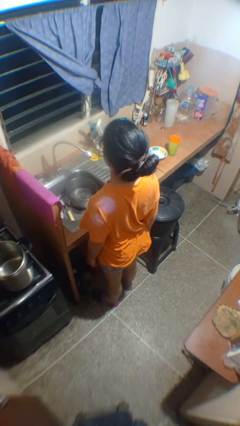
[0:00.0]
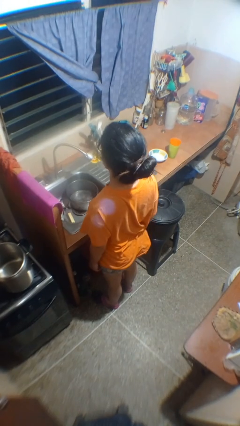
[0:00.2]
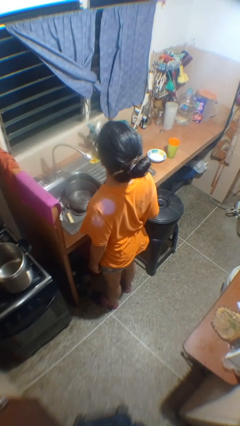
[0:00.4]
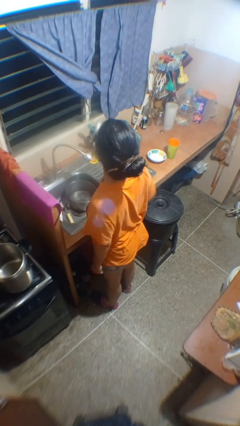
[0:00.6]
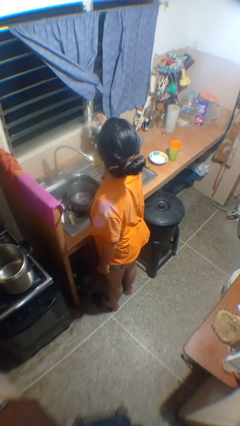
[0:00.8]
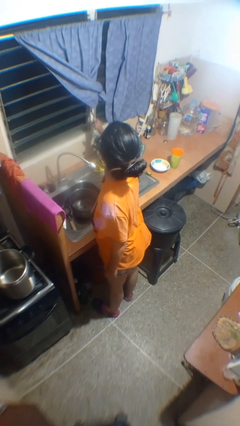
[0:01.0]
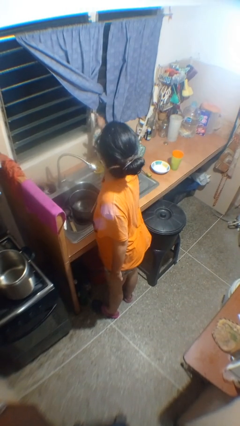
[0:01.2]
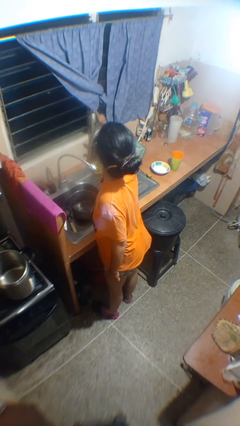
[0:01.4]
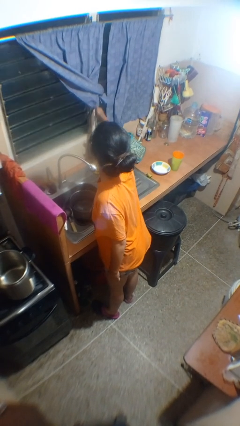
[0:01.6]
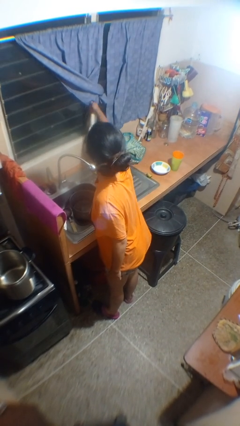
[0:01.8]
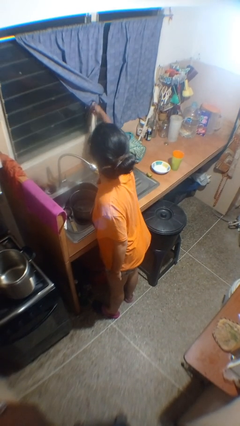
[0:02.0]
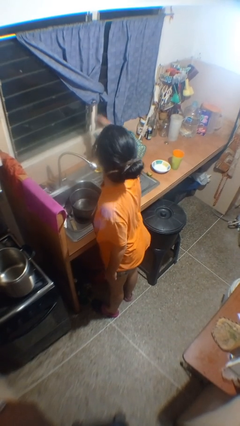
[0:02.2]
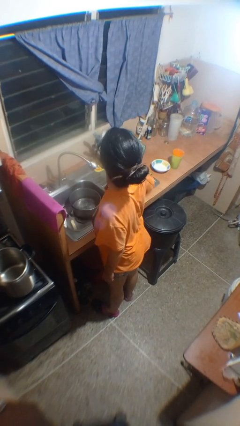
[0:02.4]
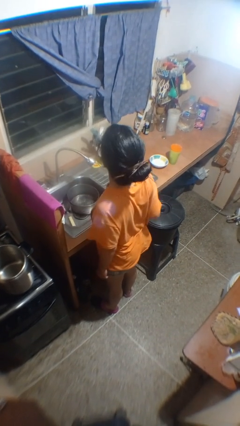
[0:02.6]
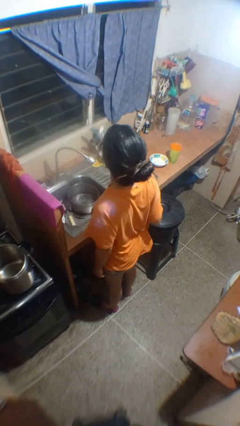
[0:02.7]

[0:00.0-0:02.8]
person closes home window

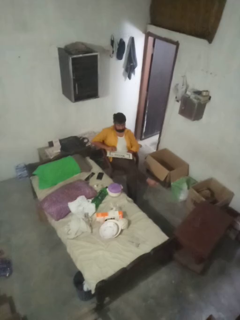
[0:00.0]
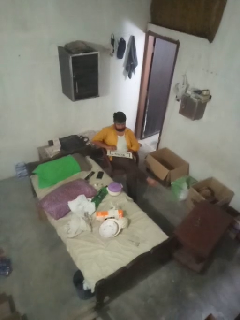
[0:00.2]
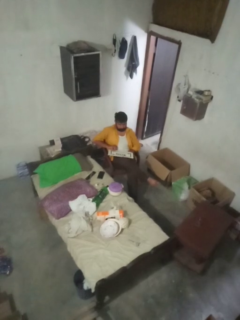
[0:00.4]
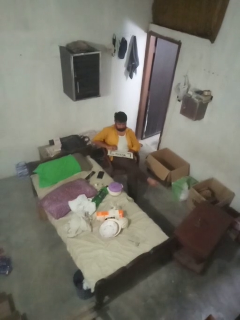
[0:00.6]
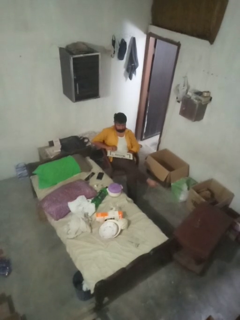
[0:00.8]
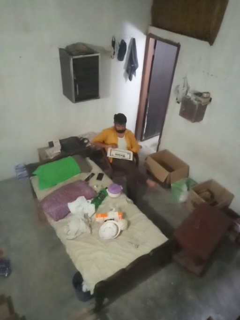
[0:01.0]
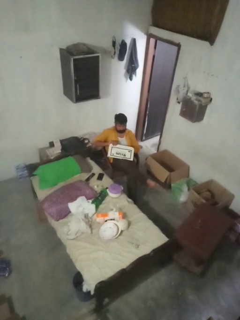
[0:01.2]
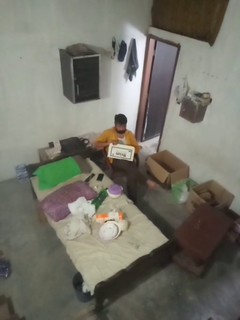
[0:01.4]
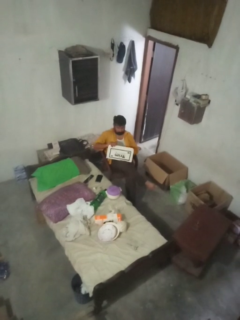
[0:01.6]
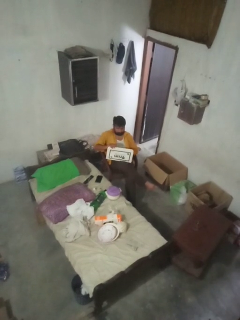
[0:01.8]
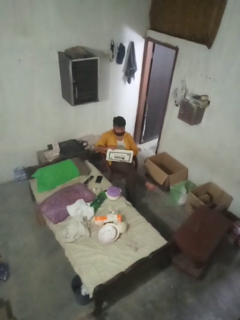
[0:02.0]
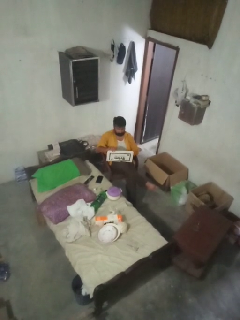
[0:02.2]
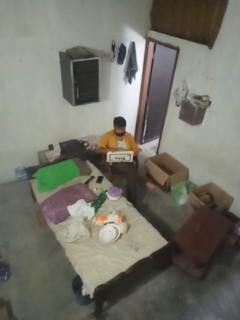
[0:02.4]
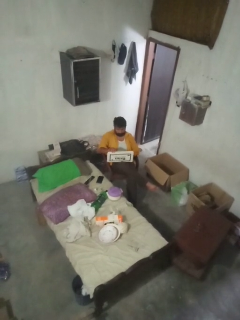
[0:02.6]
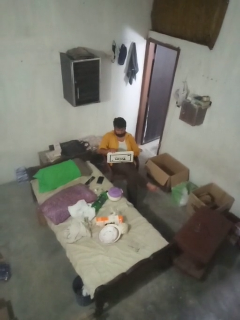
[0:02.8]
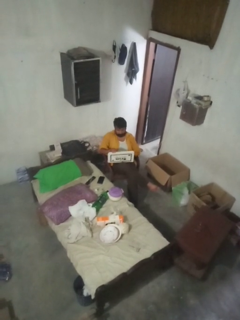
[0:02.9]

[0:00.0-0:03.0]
person opens laptop

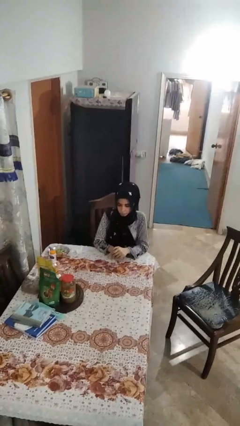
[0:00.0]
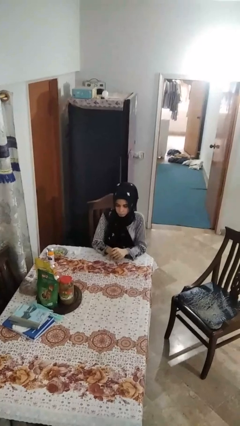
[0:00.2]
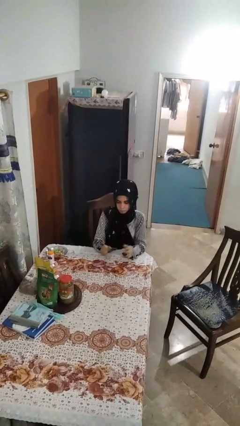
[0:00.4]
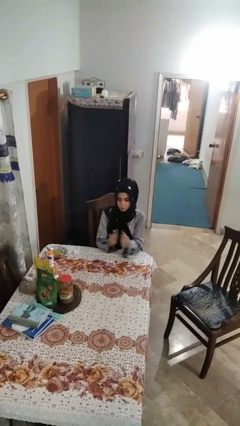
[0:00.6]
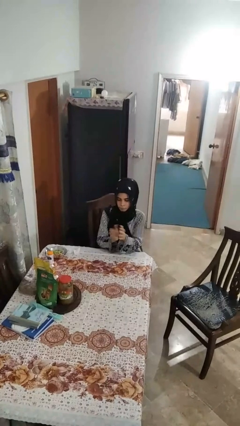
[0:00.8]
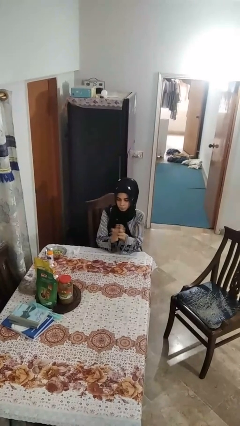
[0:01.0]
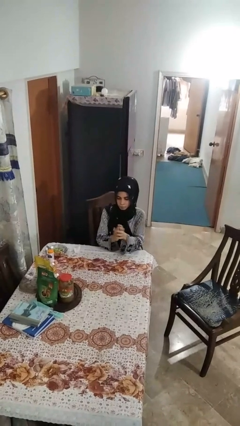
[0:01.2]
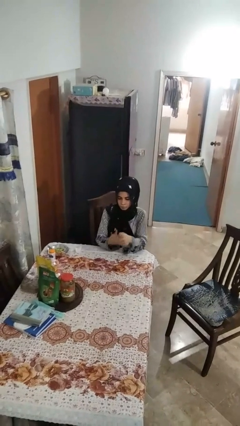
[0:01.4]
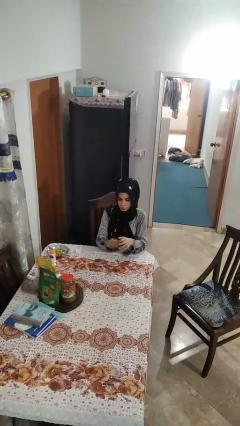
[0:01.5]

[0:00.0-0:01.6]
person claps hands

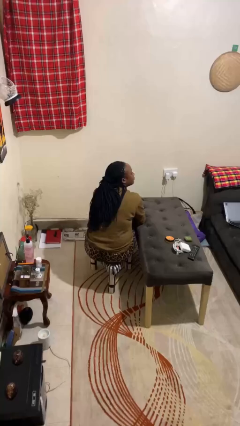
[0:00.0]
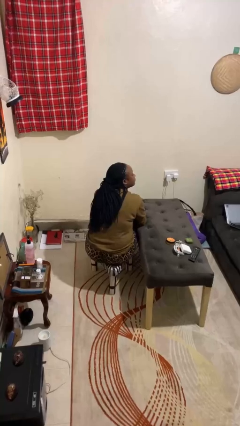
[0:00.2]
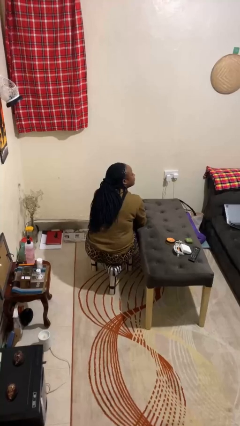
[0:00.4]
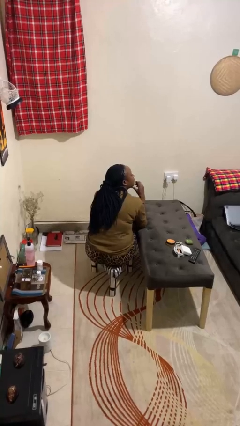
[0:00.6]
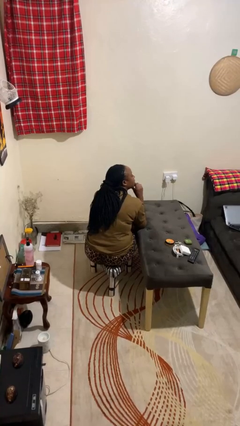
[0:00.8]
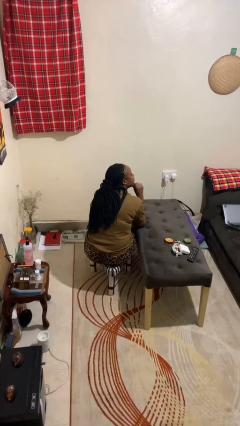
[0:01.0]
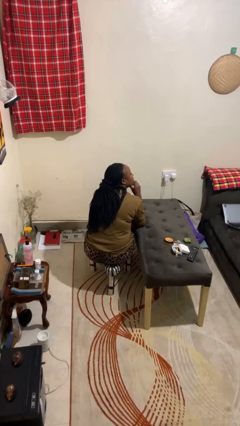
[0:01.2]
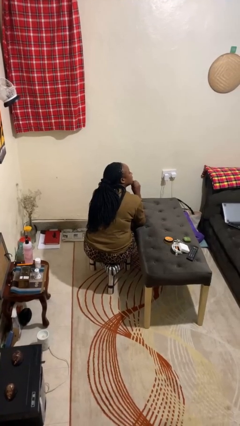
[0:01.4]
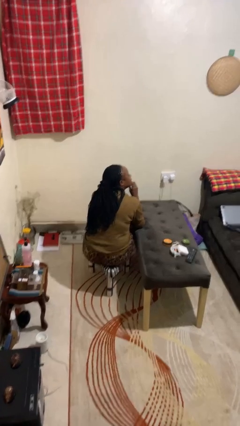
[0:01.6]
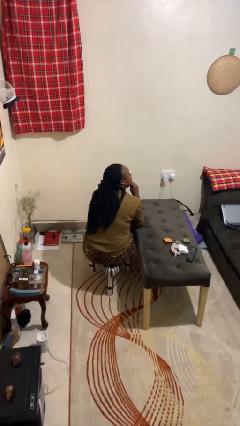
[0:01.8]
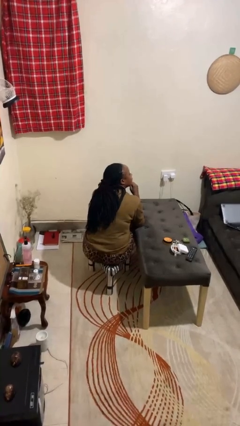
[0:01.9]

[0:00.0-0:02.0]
person strokes chin

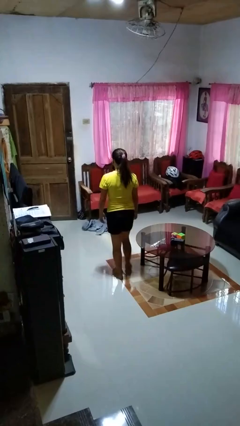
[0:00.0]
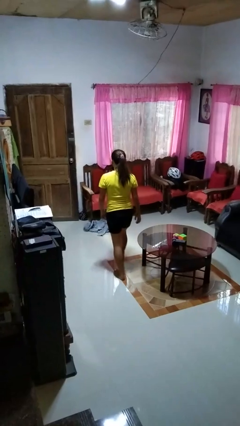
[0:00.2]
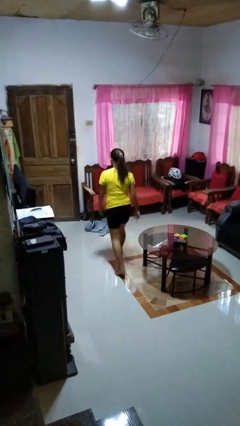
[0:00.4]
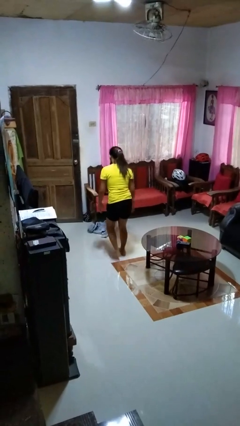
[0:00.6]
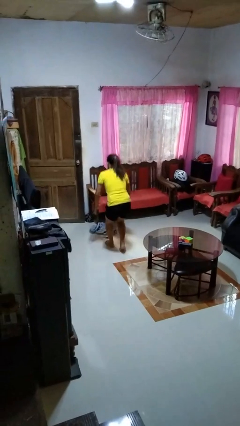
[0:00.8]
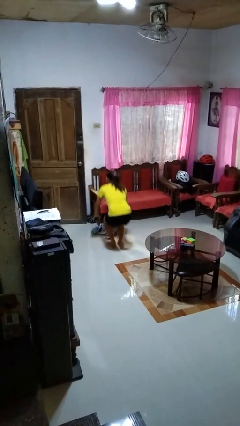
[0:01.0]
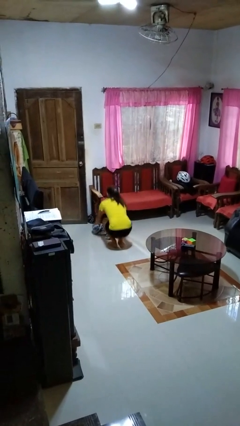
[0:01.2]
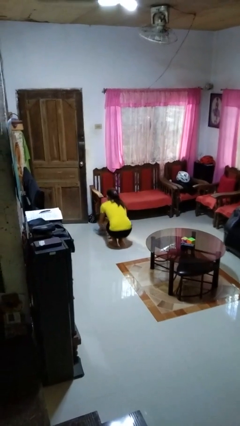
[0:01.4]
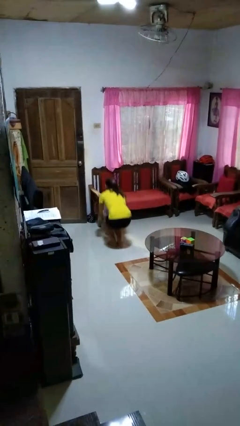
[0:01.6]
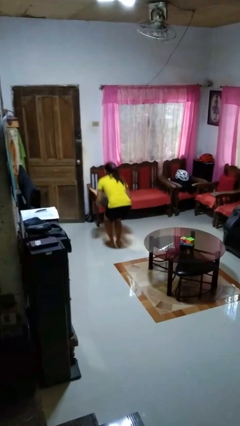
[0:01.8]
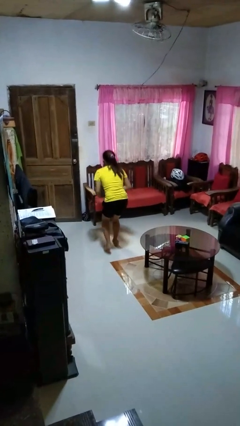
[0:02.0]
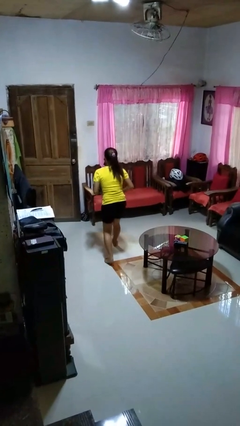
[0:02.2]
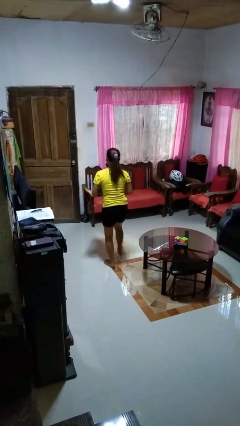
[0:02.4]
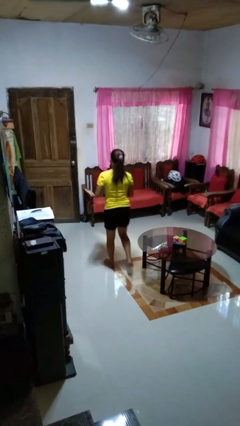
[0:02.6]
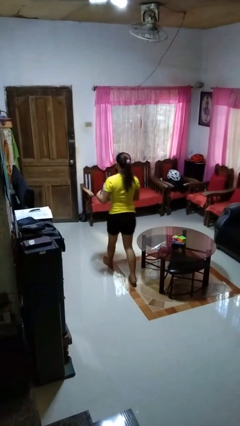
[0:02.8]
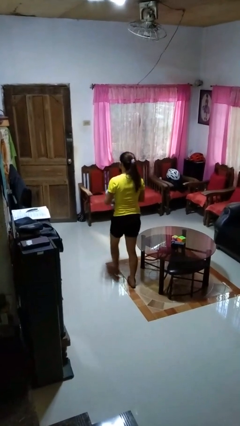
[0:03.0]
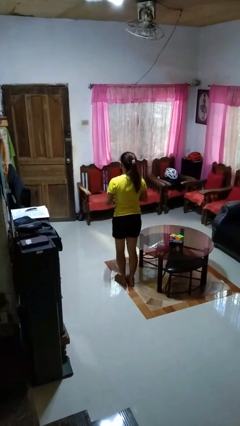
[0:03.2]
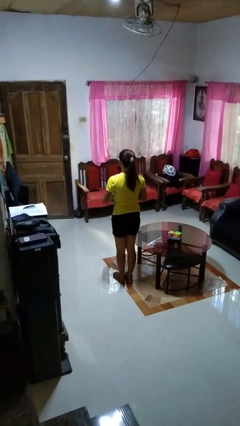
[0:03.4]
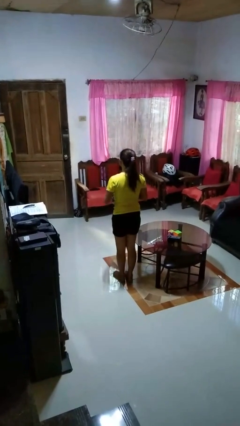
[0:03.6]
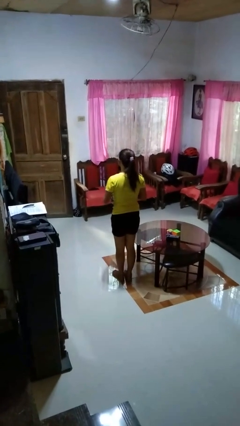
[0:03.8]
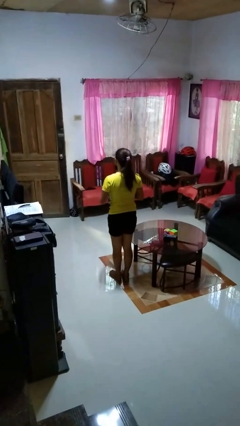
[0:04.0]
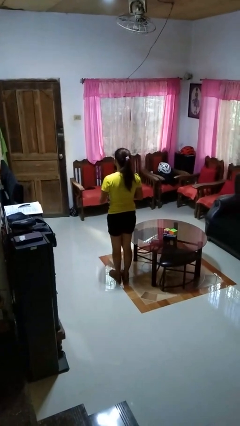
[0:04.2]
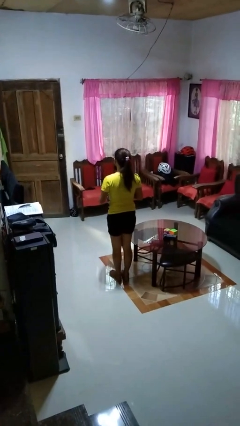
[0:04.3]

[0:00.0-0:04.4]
person picks up object from floor

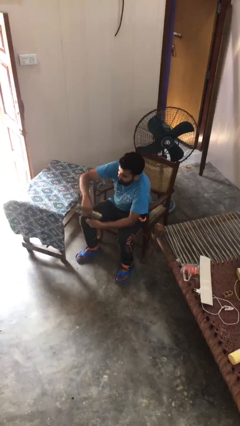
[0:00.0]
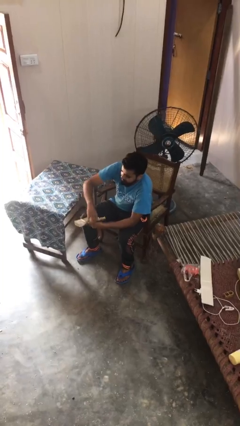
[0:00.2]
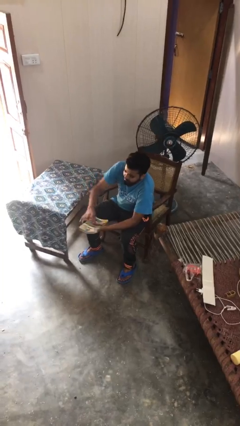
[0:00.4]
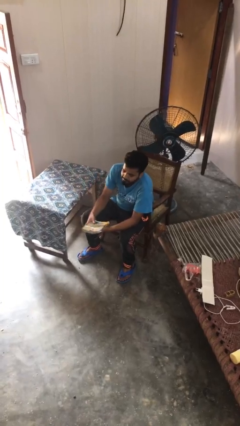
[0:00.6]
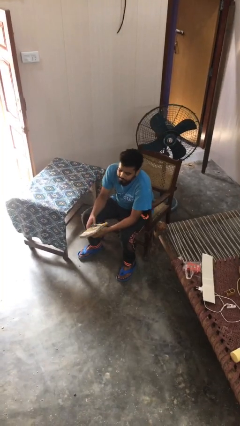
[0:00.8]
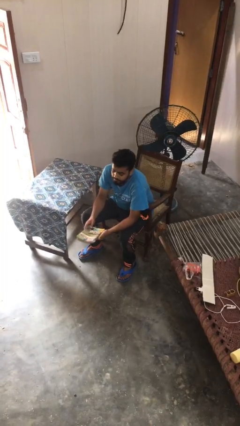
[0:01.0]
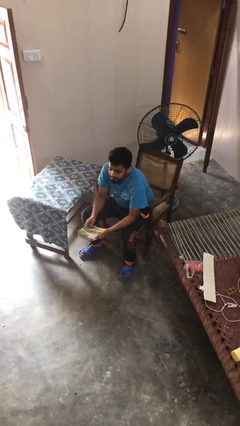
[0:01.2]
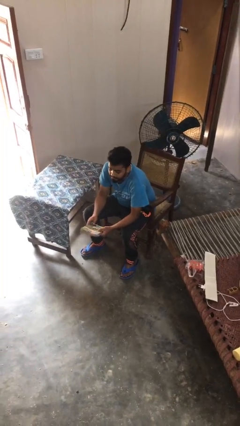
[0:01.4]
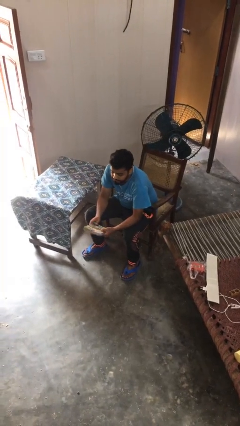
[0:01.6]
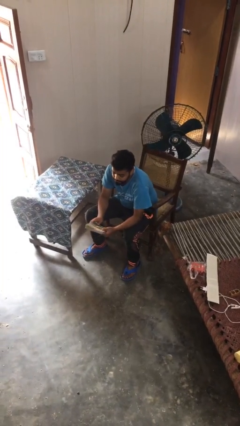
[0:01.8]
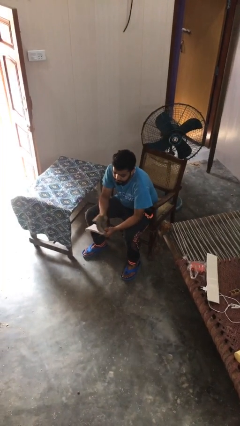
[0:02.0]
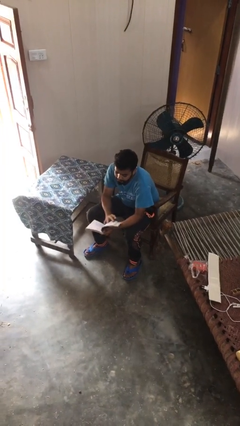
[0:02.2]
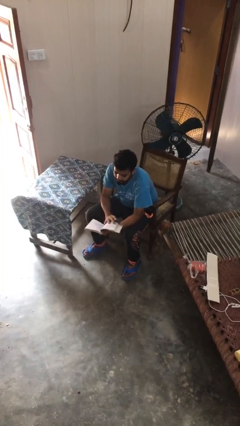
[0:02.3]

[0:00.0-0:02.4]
person picks up object from table

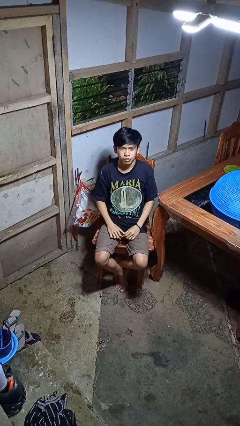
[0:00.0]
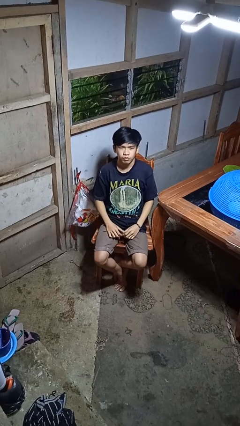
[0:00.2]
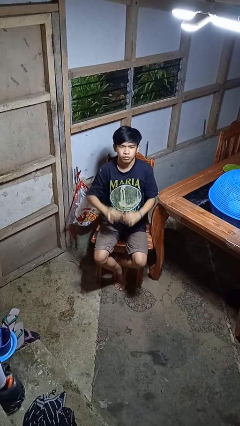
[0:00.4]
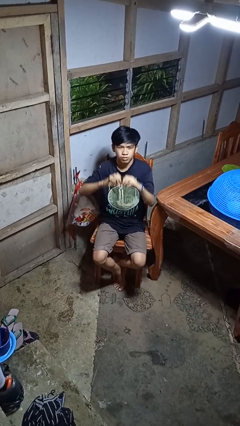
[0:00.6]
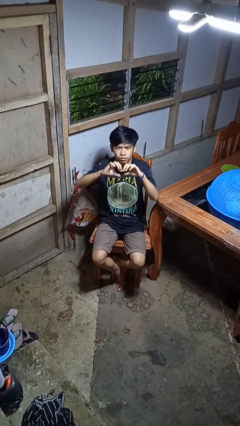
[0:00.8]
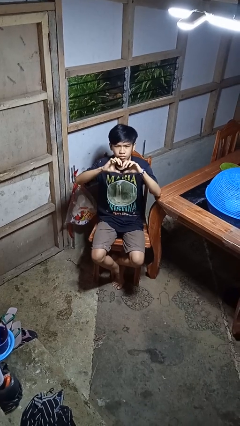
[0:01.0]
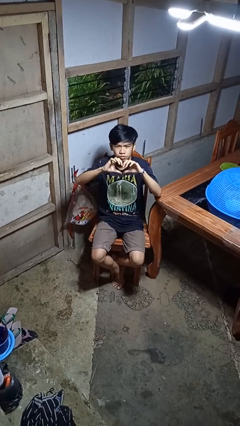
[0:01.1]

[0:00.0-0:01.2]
person gestures heart

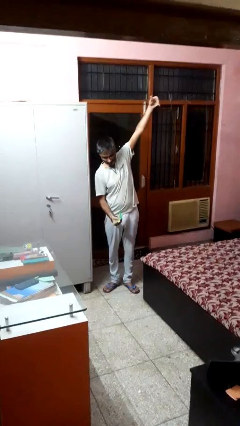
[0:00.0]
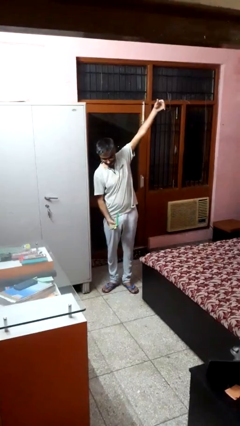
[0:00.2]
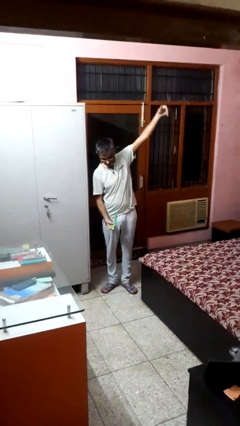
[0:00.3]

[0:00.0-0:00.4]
person catches dropped object
